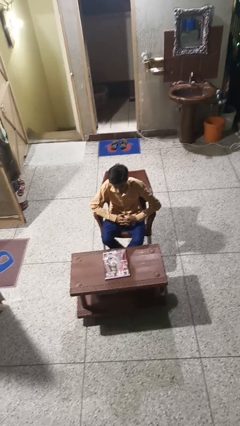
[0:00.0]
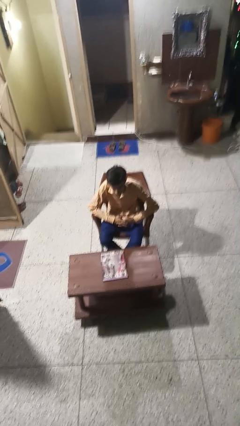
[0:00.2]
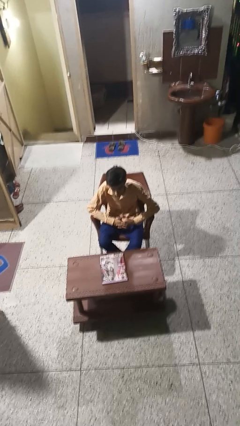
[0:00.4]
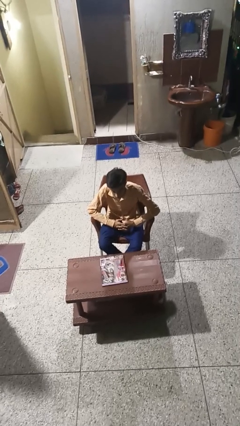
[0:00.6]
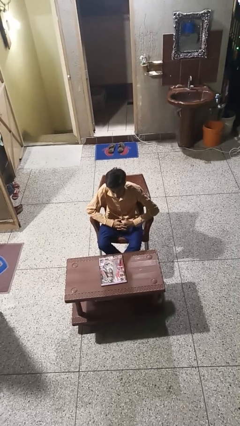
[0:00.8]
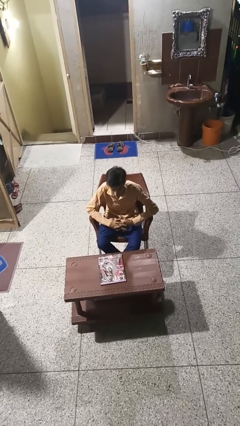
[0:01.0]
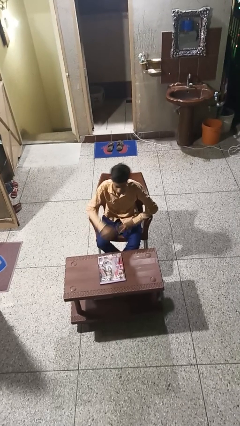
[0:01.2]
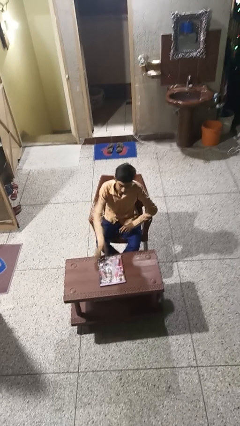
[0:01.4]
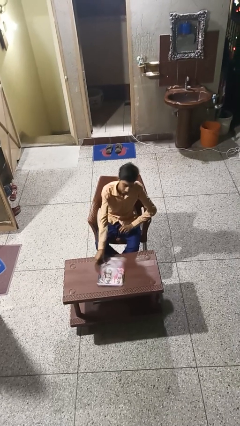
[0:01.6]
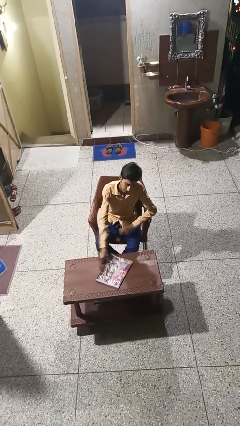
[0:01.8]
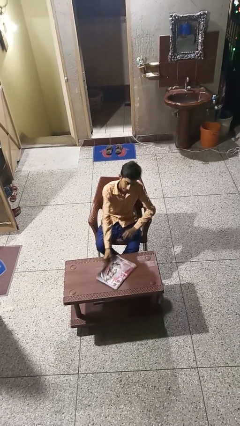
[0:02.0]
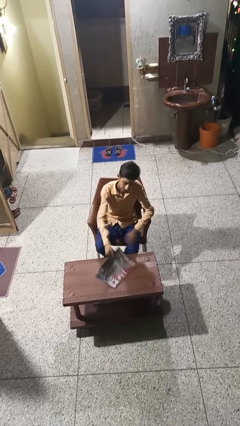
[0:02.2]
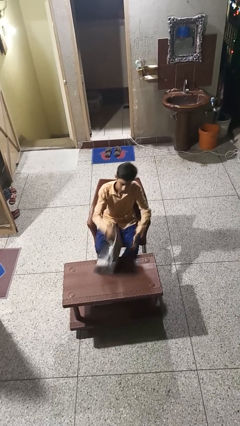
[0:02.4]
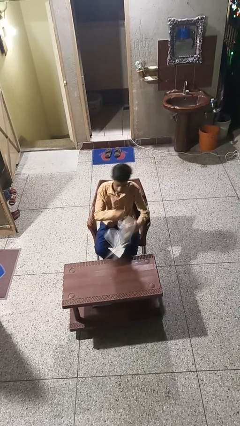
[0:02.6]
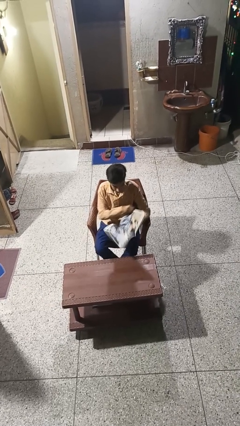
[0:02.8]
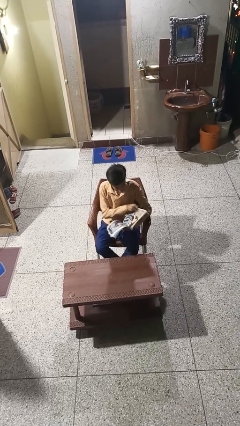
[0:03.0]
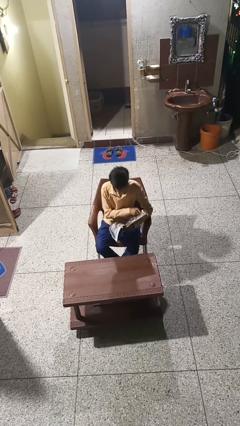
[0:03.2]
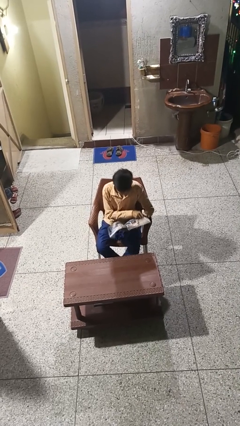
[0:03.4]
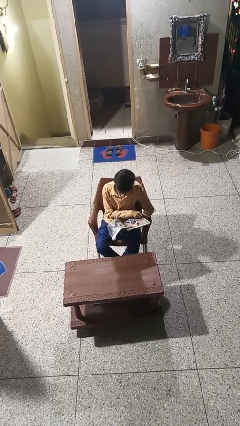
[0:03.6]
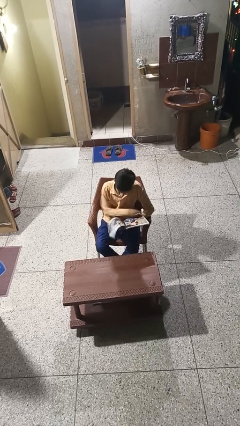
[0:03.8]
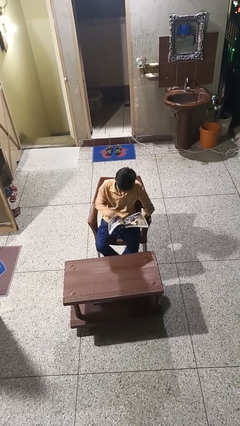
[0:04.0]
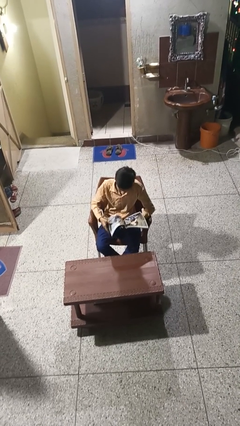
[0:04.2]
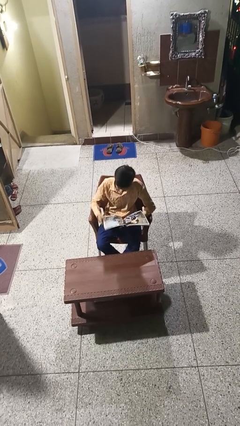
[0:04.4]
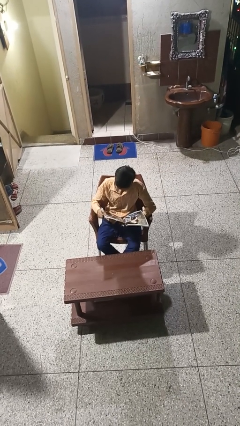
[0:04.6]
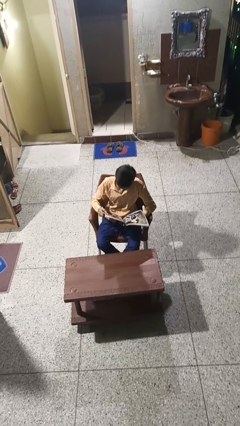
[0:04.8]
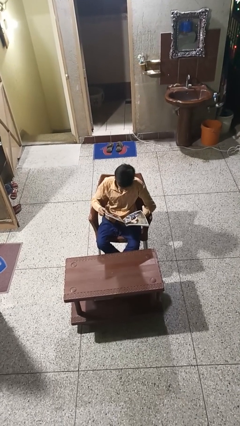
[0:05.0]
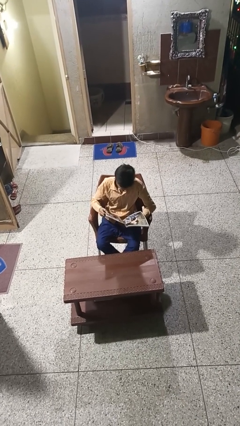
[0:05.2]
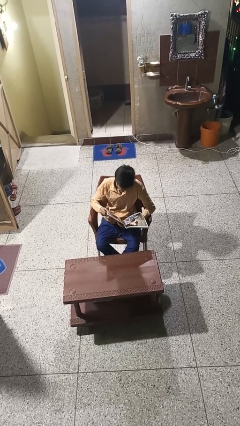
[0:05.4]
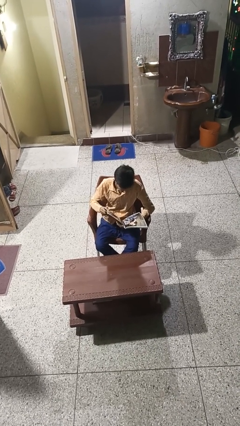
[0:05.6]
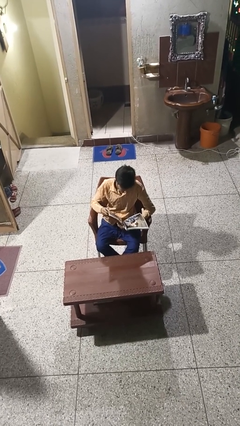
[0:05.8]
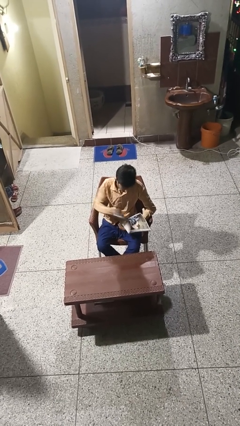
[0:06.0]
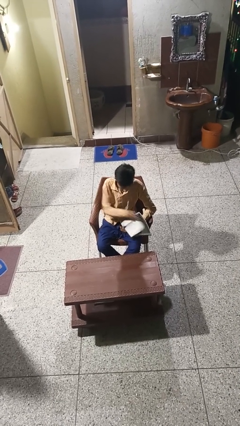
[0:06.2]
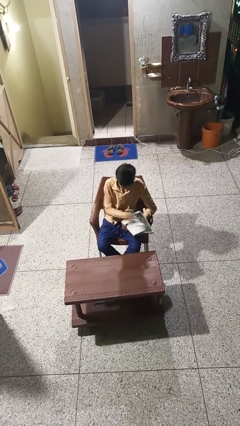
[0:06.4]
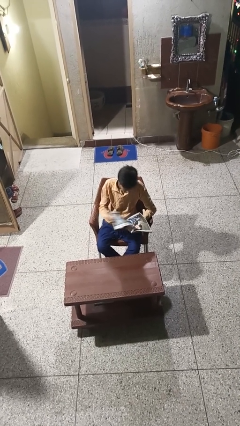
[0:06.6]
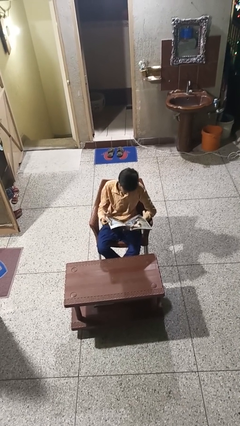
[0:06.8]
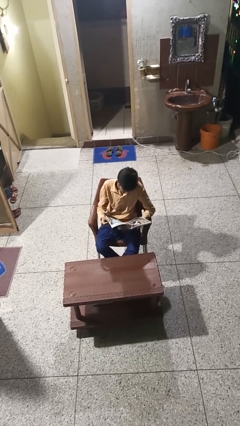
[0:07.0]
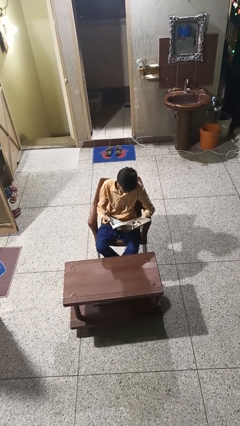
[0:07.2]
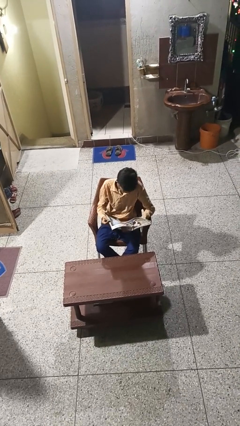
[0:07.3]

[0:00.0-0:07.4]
person reads magazine

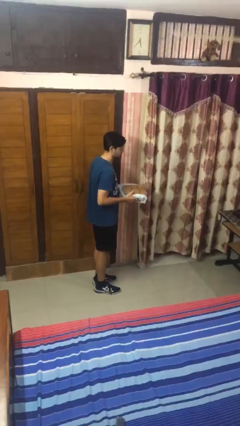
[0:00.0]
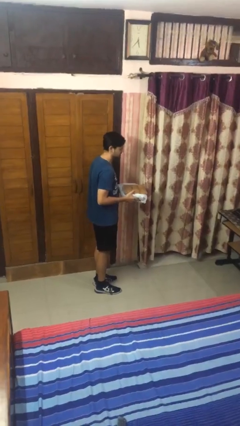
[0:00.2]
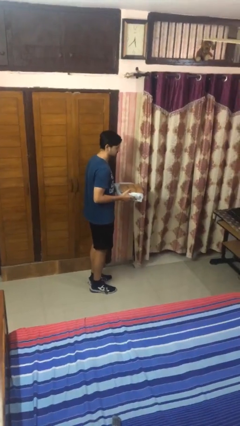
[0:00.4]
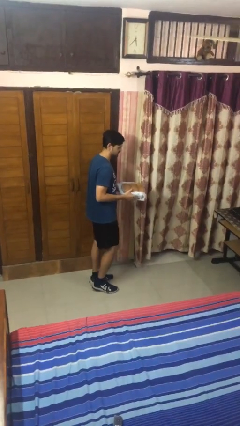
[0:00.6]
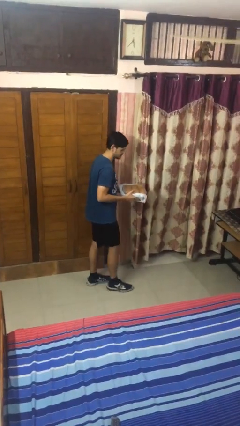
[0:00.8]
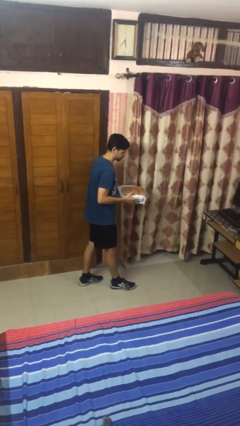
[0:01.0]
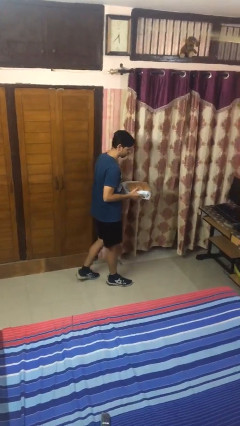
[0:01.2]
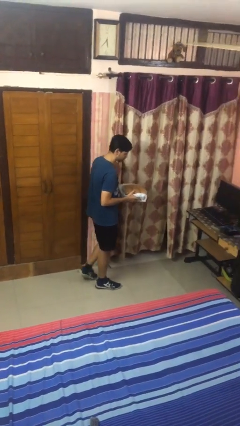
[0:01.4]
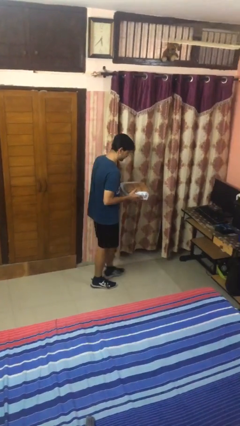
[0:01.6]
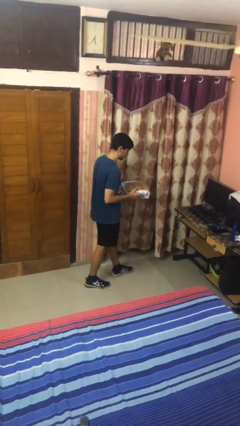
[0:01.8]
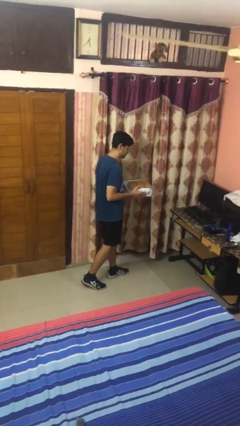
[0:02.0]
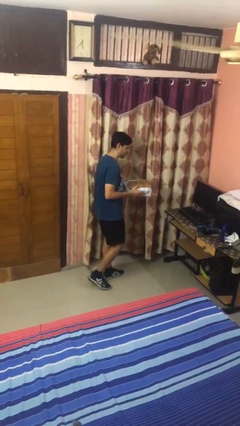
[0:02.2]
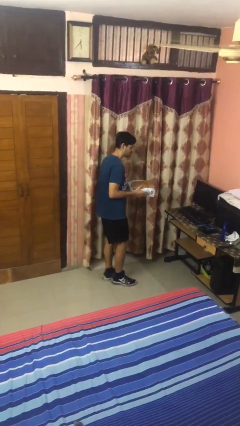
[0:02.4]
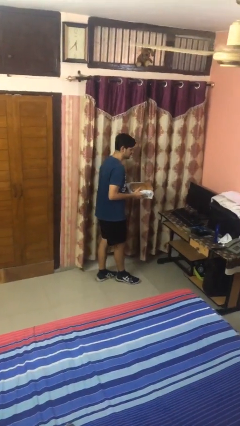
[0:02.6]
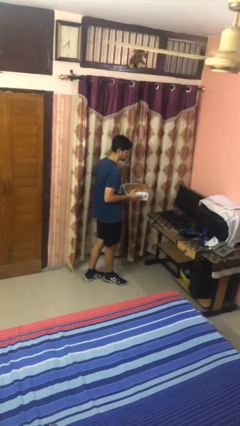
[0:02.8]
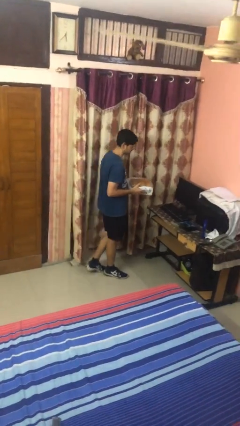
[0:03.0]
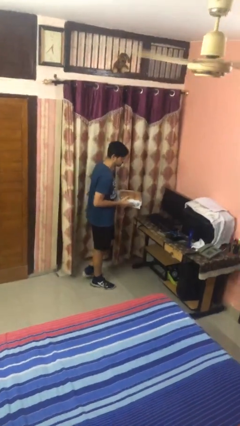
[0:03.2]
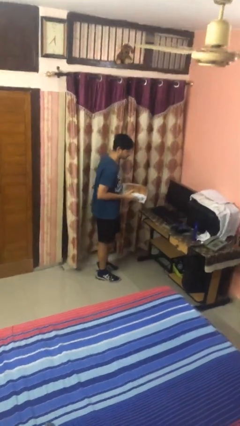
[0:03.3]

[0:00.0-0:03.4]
person carries groceries

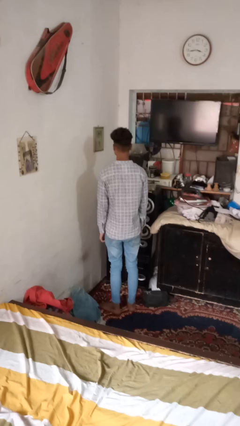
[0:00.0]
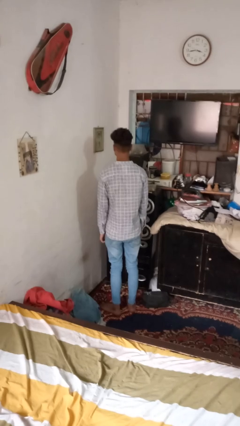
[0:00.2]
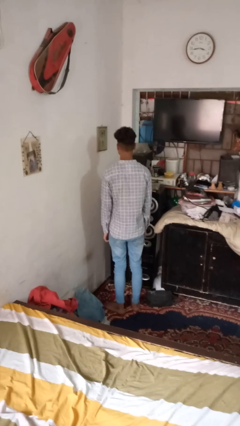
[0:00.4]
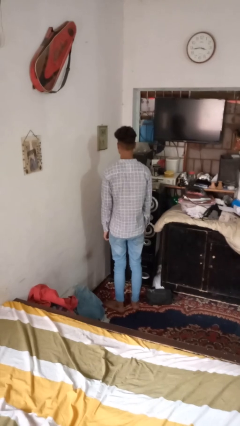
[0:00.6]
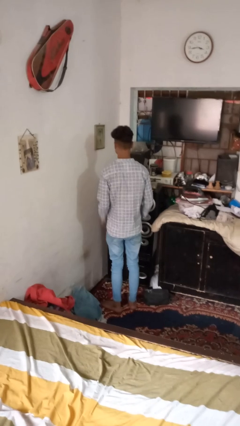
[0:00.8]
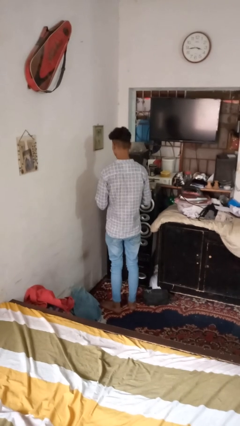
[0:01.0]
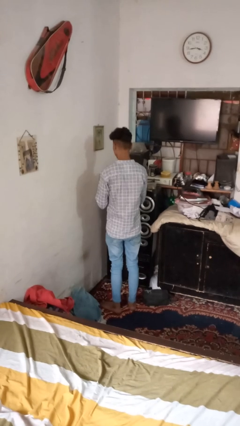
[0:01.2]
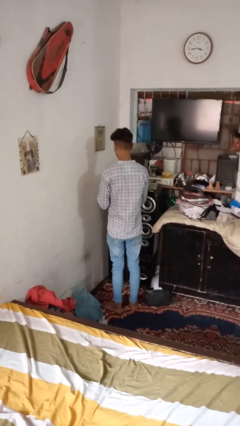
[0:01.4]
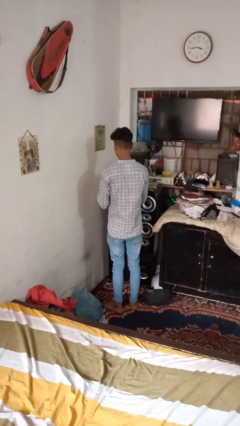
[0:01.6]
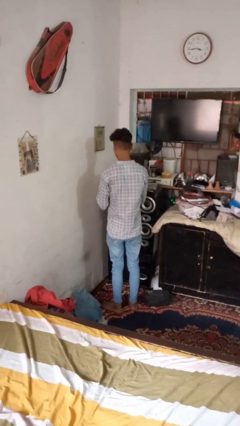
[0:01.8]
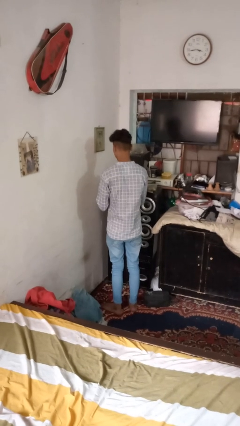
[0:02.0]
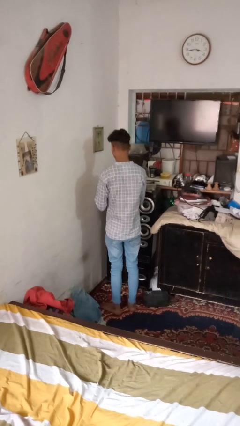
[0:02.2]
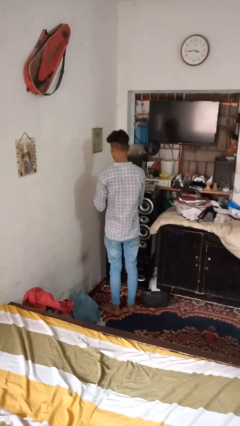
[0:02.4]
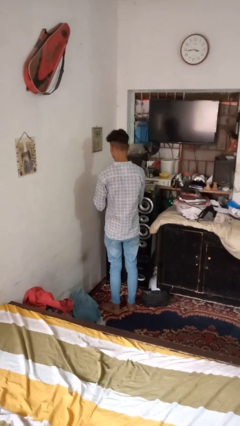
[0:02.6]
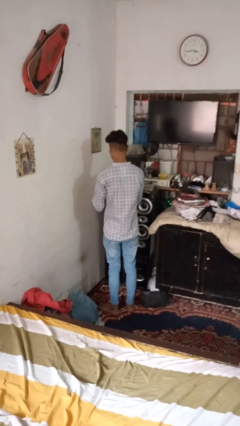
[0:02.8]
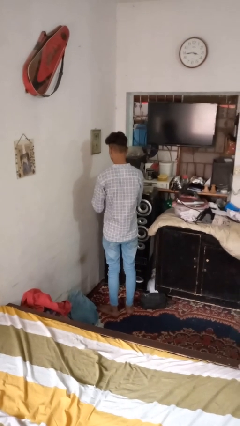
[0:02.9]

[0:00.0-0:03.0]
person clips fingernails

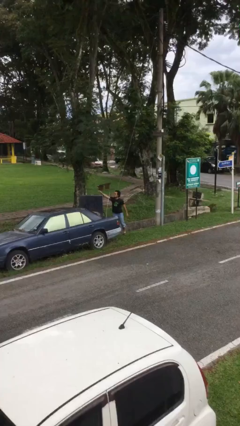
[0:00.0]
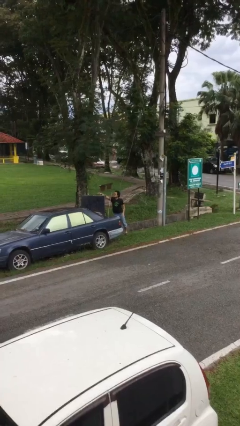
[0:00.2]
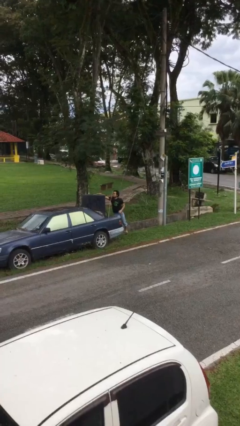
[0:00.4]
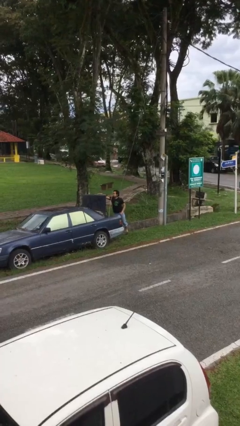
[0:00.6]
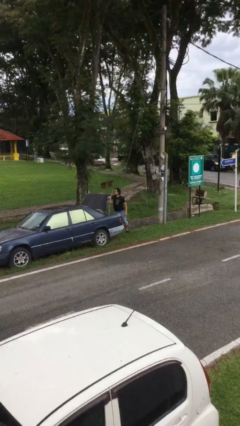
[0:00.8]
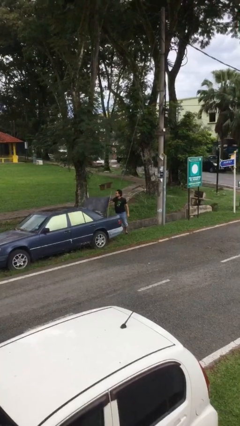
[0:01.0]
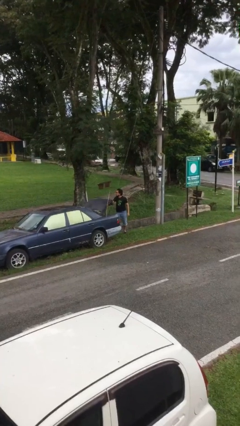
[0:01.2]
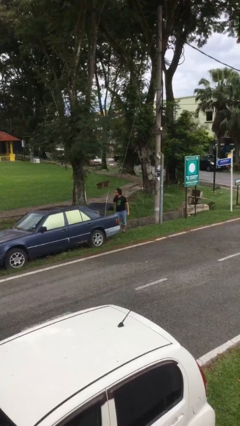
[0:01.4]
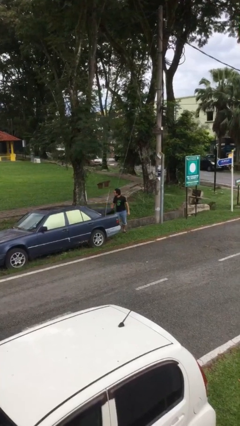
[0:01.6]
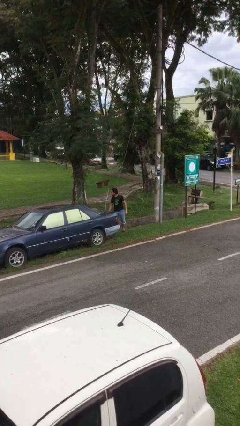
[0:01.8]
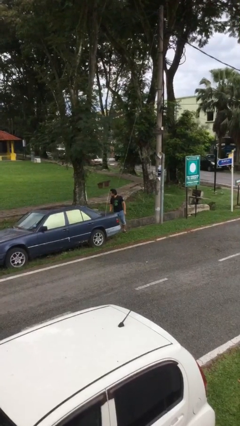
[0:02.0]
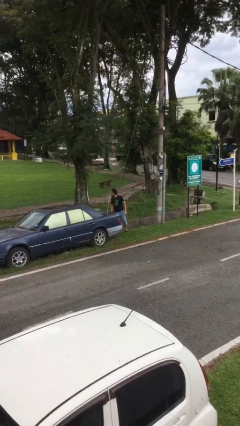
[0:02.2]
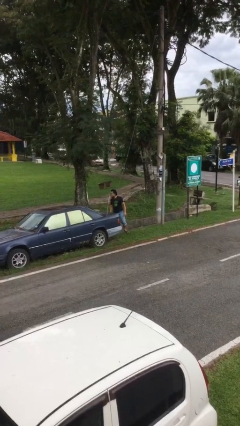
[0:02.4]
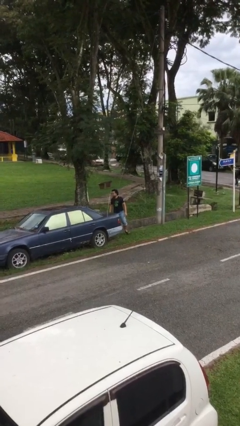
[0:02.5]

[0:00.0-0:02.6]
person closes car trunk

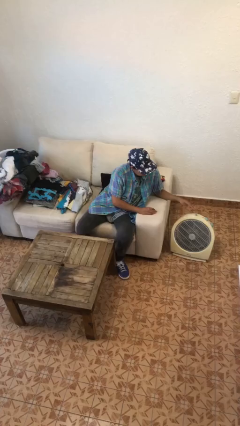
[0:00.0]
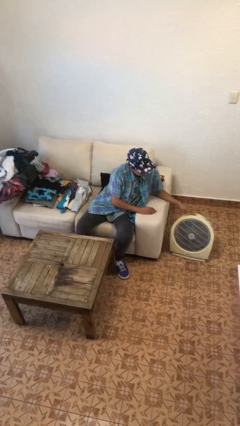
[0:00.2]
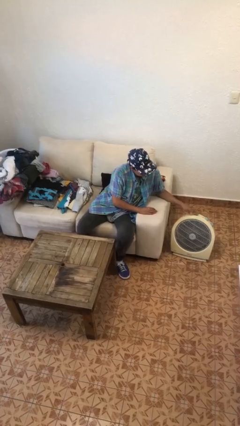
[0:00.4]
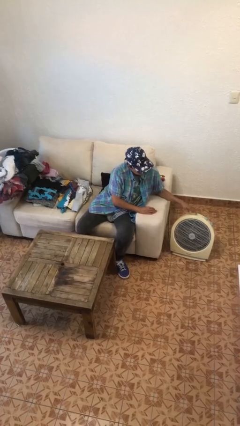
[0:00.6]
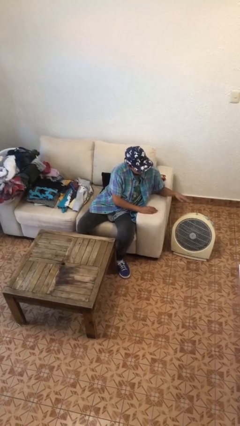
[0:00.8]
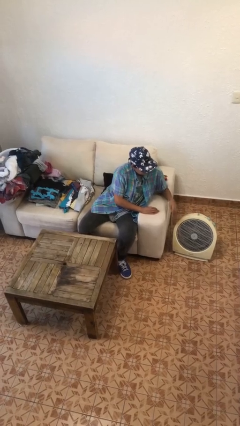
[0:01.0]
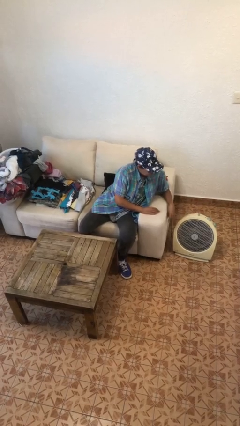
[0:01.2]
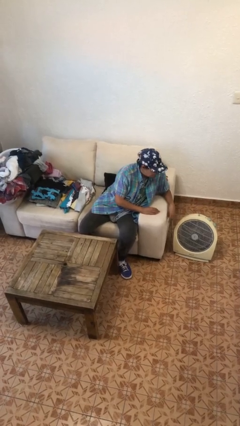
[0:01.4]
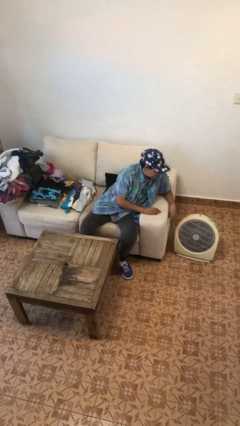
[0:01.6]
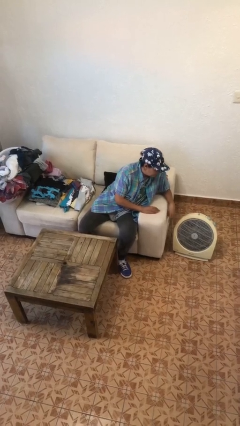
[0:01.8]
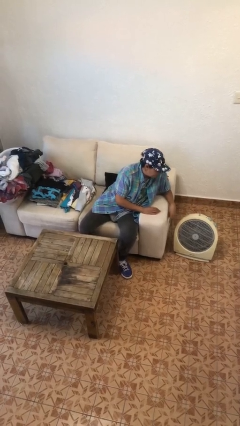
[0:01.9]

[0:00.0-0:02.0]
person turns off fan
